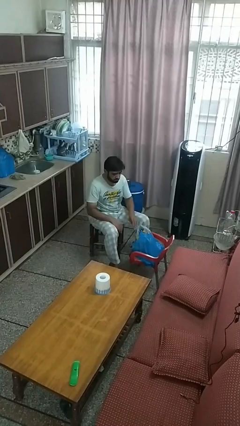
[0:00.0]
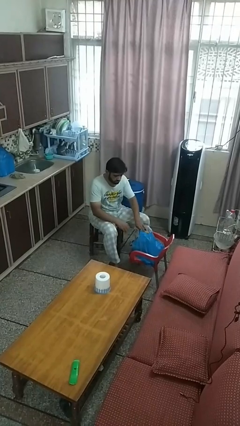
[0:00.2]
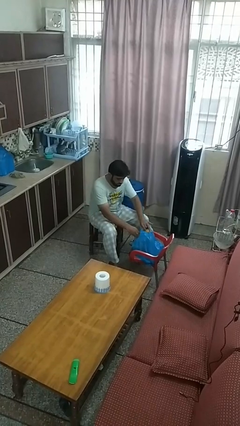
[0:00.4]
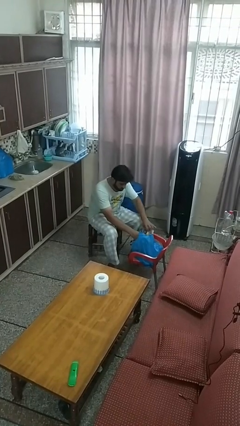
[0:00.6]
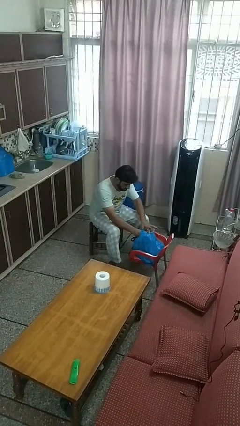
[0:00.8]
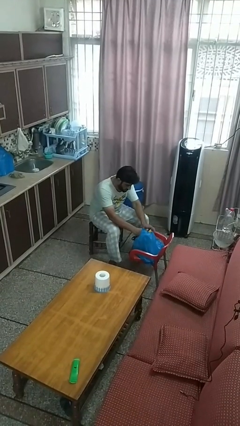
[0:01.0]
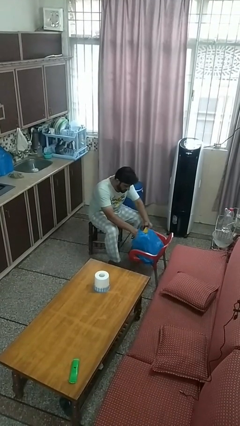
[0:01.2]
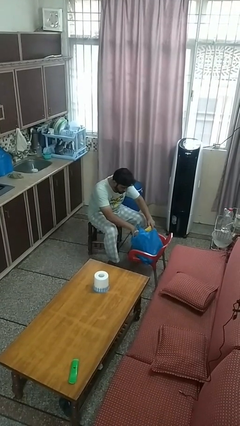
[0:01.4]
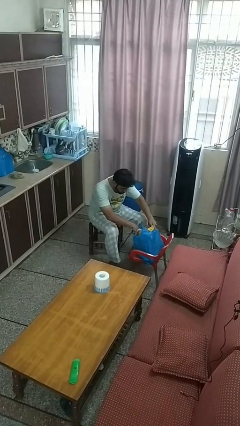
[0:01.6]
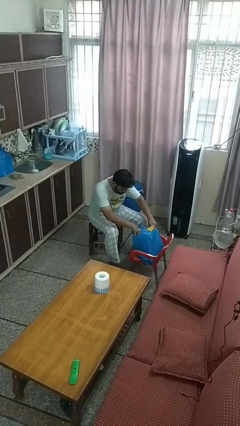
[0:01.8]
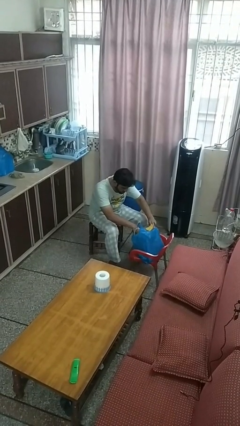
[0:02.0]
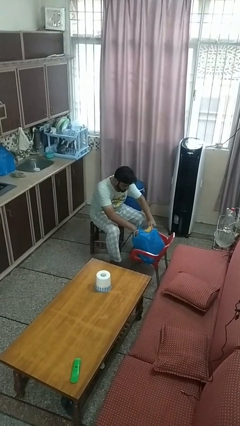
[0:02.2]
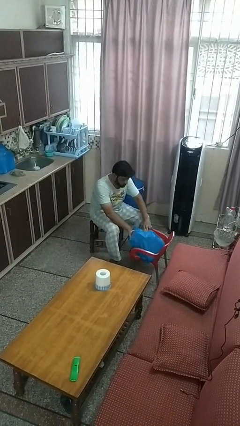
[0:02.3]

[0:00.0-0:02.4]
person searches in bag

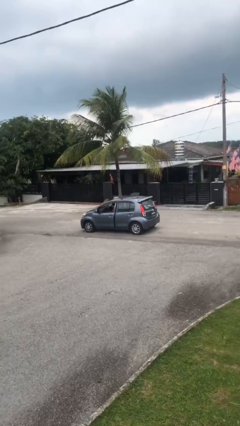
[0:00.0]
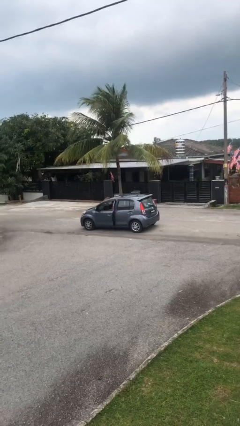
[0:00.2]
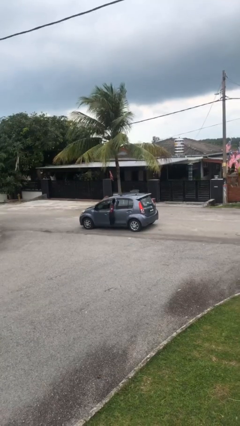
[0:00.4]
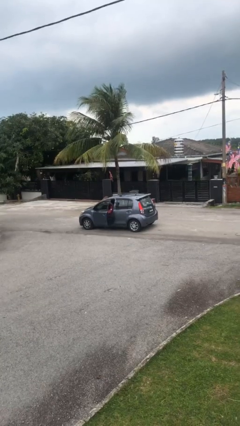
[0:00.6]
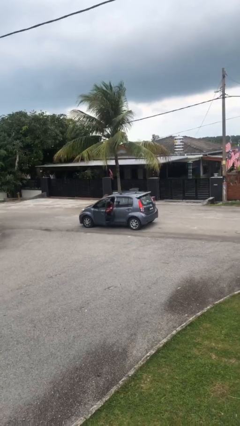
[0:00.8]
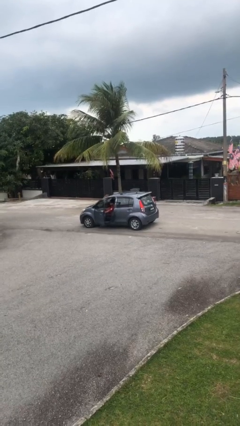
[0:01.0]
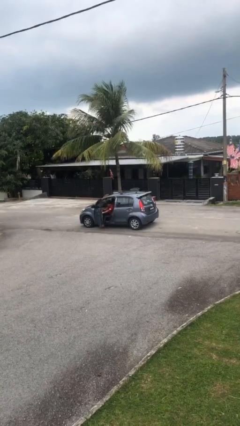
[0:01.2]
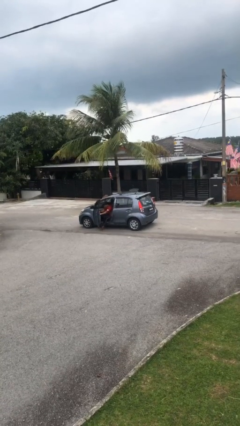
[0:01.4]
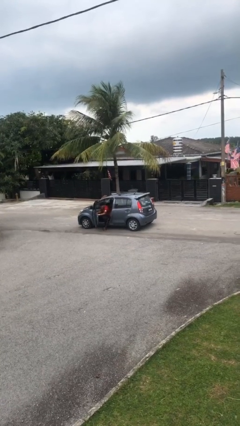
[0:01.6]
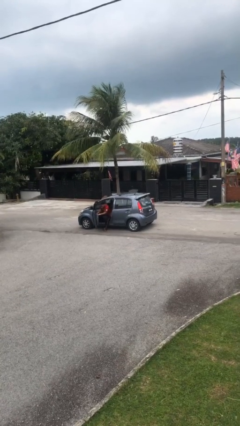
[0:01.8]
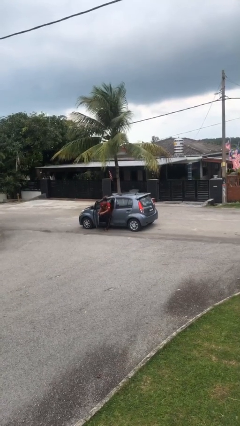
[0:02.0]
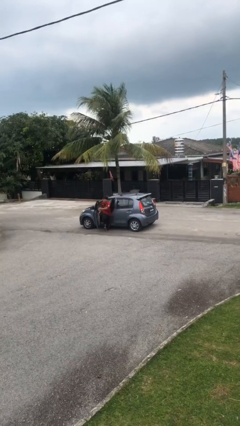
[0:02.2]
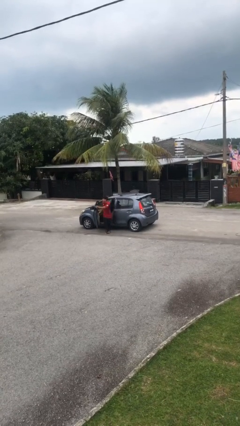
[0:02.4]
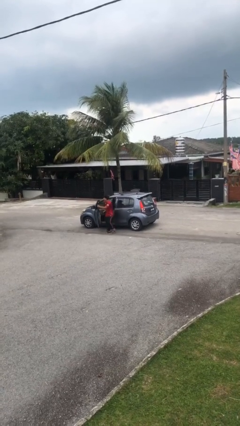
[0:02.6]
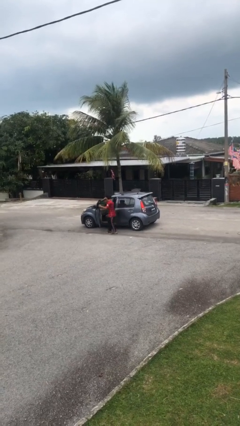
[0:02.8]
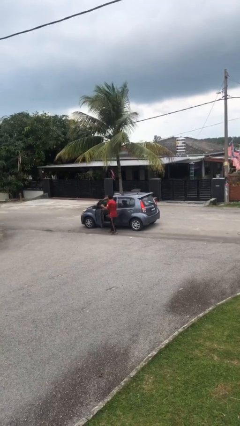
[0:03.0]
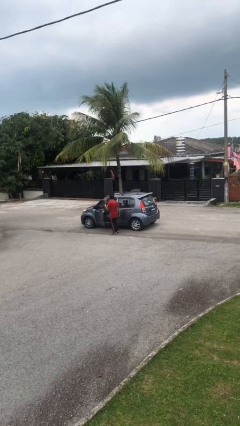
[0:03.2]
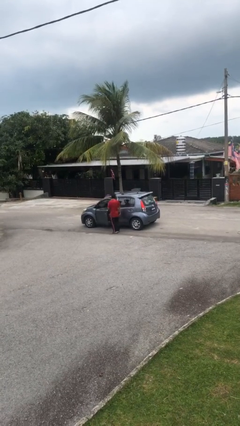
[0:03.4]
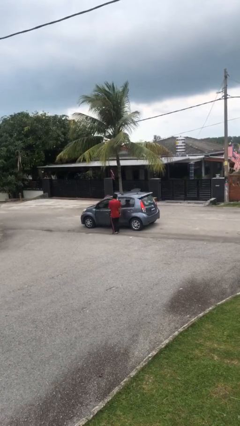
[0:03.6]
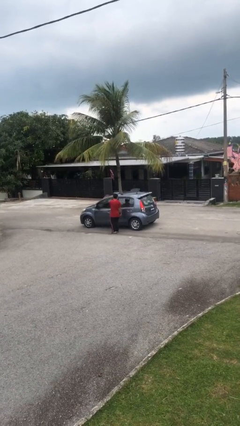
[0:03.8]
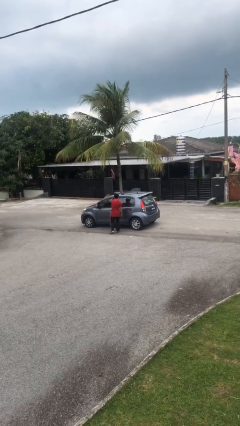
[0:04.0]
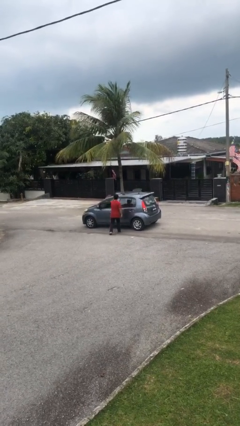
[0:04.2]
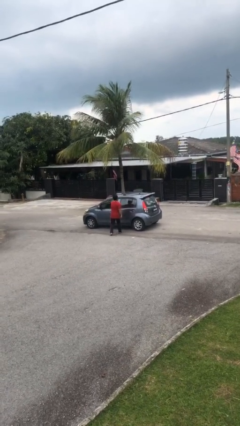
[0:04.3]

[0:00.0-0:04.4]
car drops off person

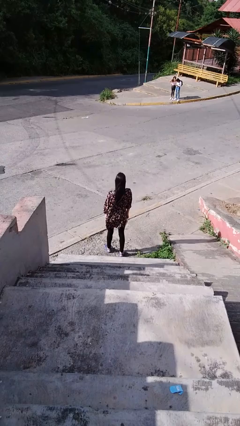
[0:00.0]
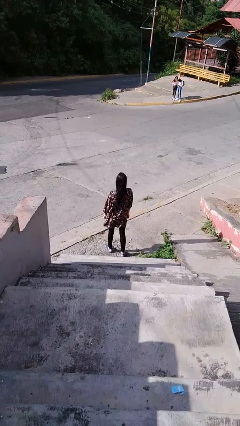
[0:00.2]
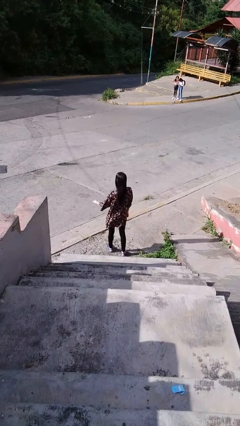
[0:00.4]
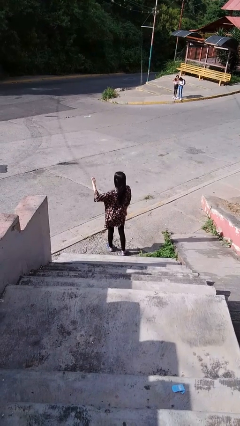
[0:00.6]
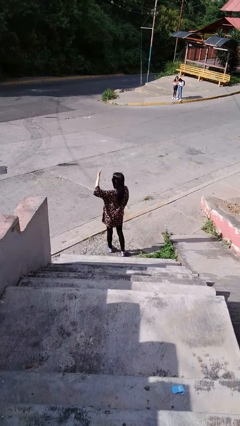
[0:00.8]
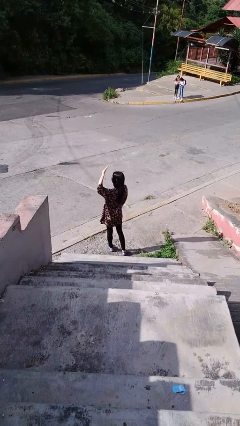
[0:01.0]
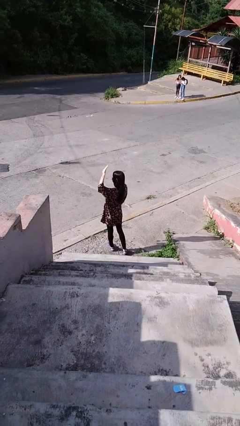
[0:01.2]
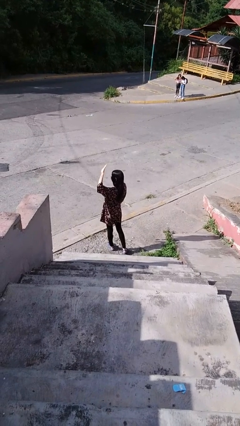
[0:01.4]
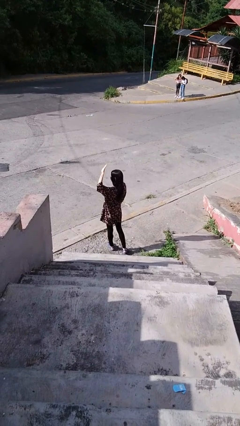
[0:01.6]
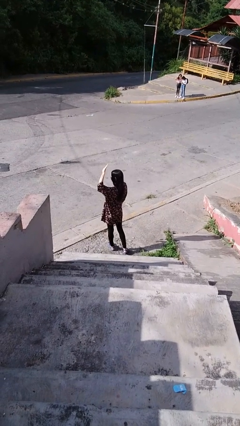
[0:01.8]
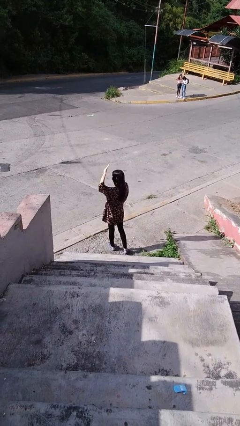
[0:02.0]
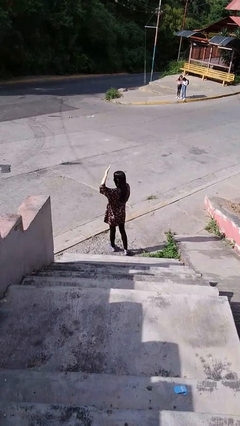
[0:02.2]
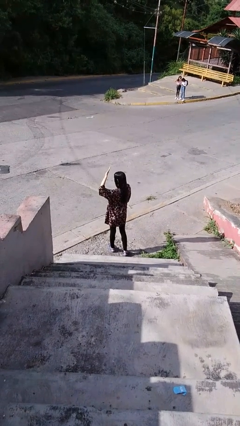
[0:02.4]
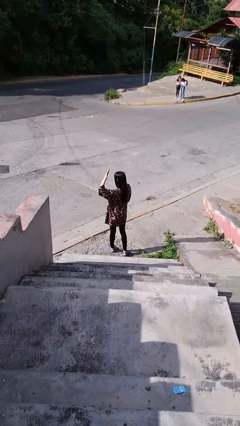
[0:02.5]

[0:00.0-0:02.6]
person shades eyes

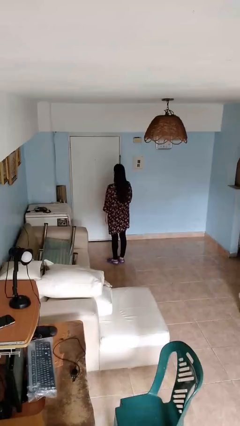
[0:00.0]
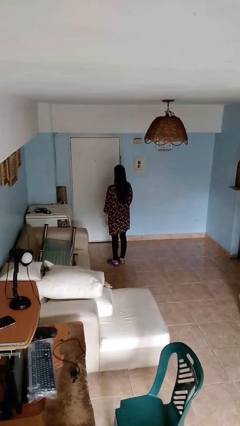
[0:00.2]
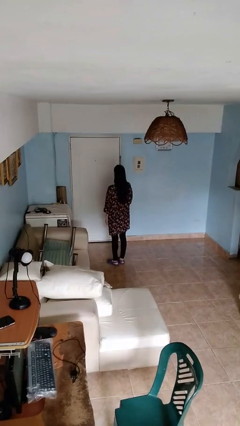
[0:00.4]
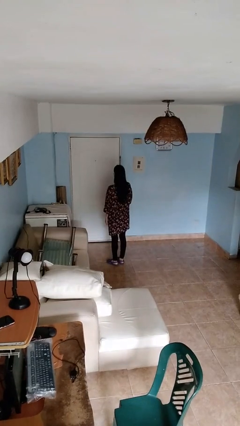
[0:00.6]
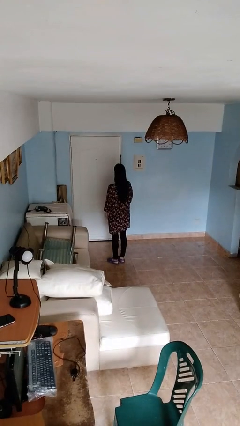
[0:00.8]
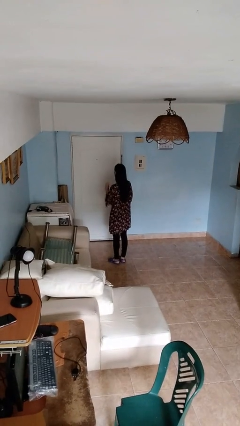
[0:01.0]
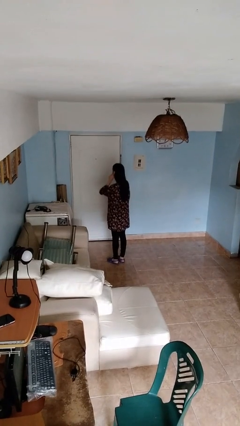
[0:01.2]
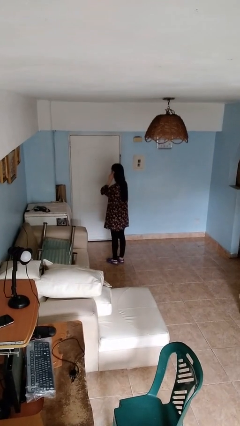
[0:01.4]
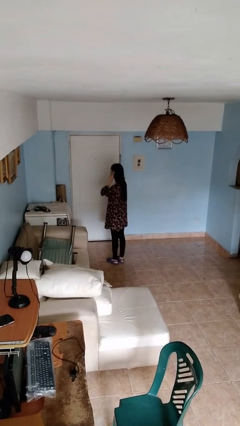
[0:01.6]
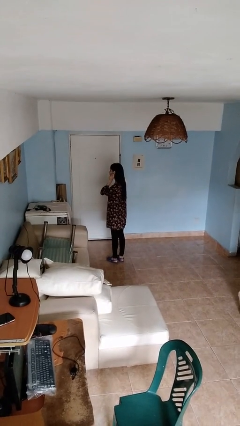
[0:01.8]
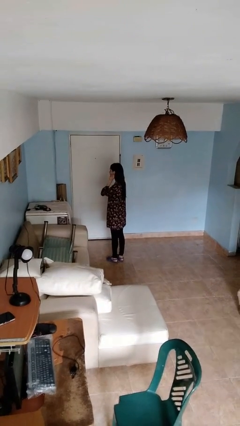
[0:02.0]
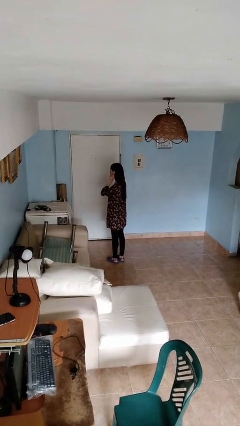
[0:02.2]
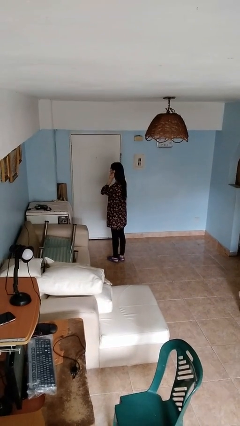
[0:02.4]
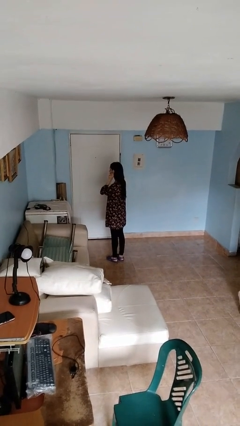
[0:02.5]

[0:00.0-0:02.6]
person touches earlobe

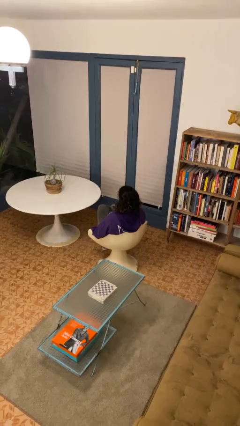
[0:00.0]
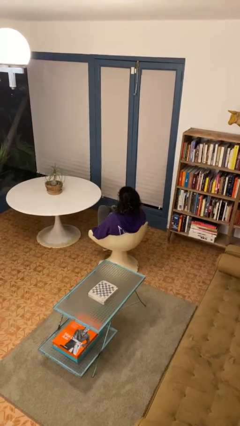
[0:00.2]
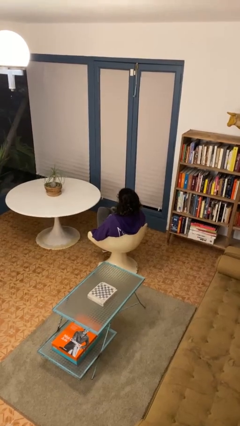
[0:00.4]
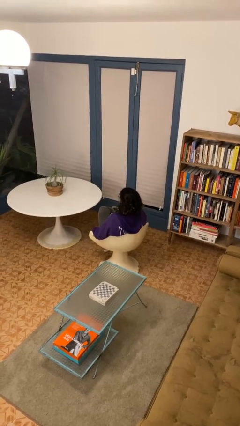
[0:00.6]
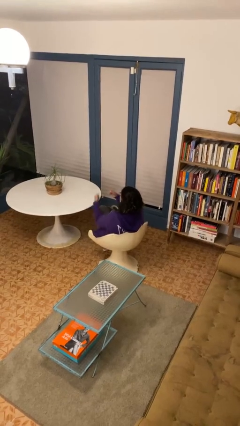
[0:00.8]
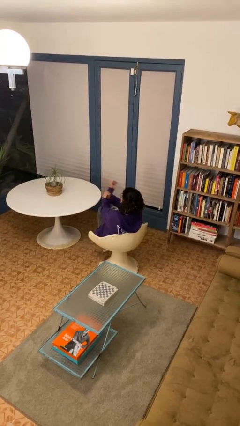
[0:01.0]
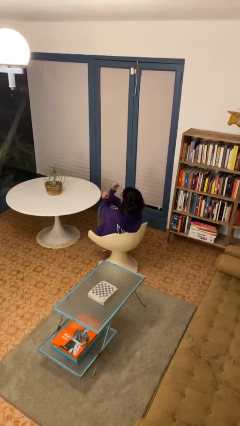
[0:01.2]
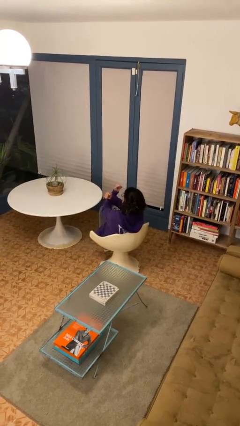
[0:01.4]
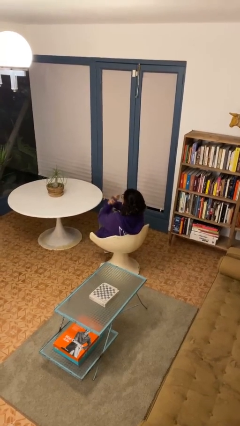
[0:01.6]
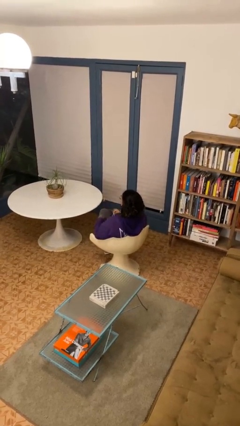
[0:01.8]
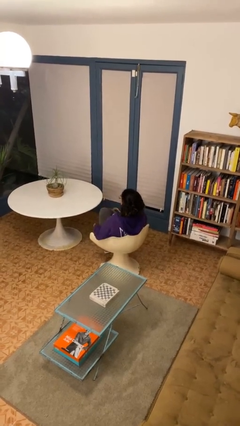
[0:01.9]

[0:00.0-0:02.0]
person gestures arms x

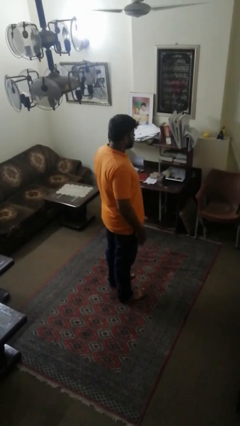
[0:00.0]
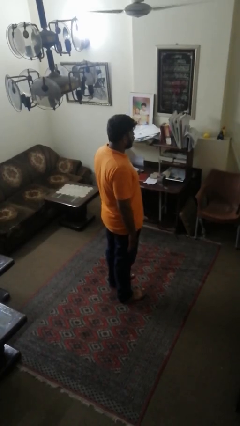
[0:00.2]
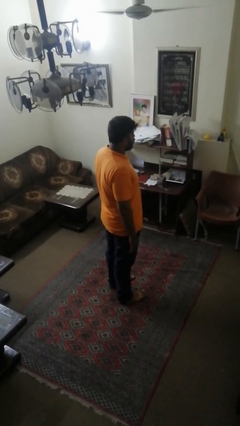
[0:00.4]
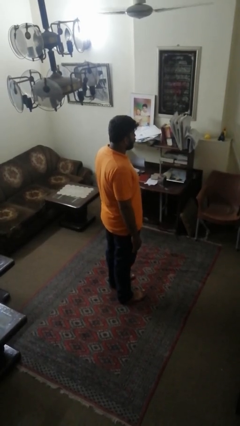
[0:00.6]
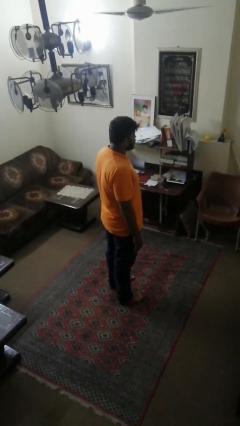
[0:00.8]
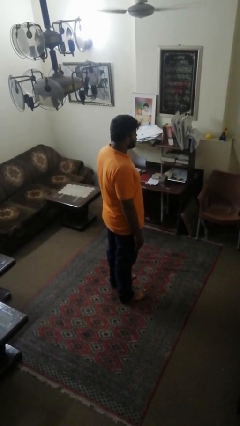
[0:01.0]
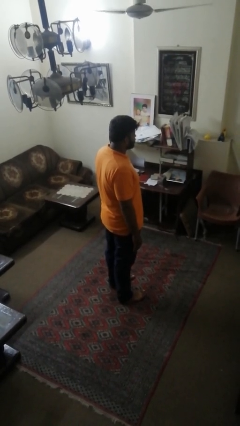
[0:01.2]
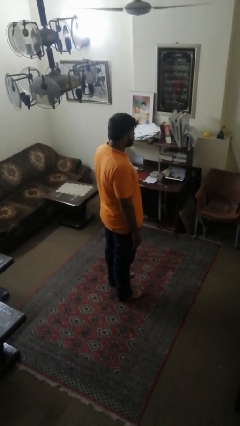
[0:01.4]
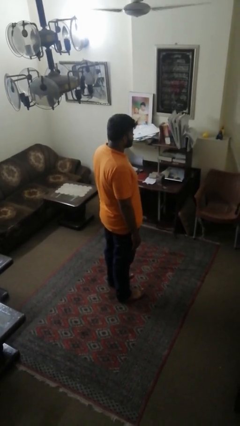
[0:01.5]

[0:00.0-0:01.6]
person puts hands in back pockets

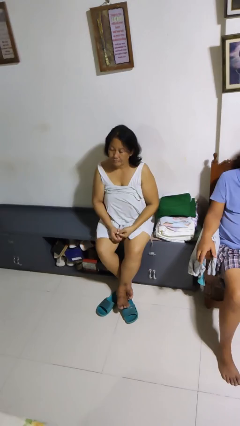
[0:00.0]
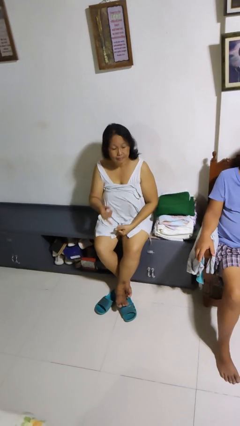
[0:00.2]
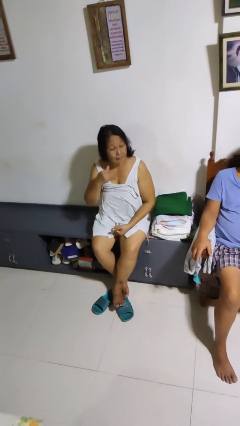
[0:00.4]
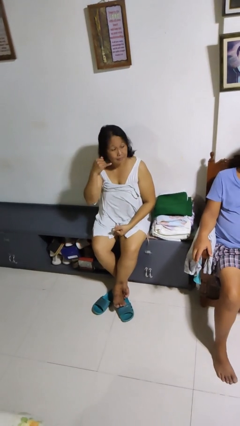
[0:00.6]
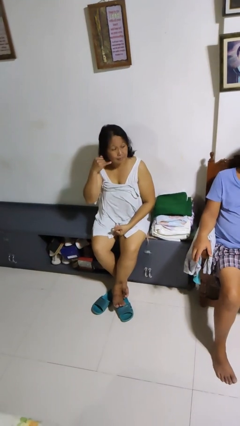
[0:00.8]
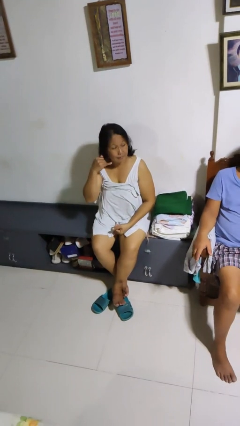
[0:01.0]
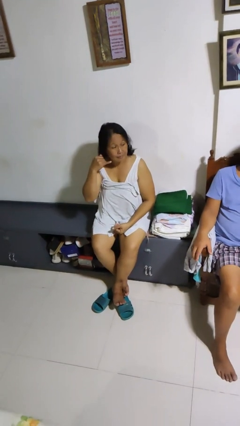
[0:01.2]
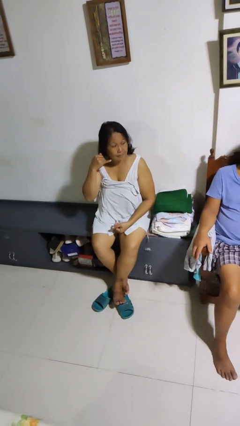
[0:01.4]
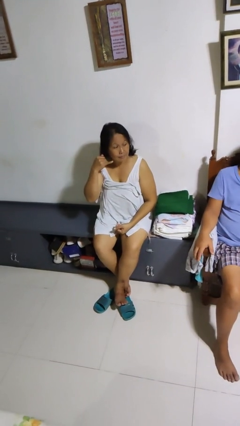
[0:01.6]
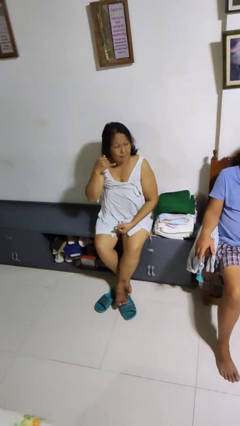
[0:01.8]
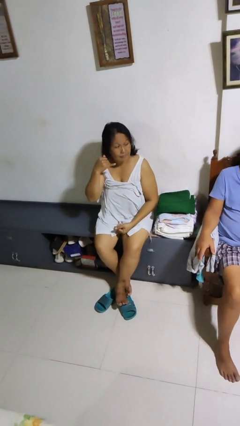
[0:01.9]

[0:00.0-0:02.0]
person gestures call me
